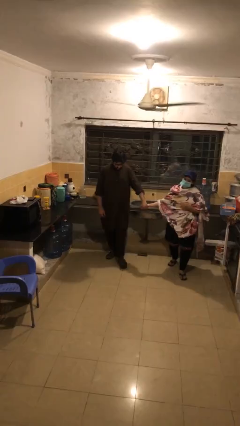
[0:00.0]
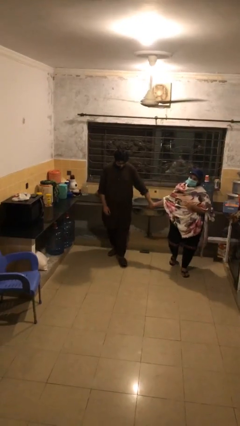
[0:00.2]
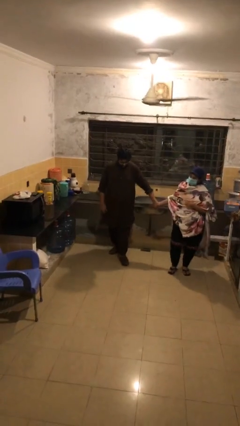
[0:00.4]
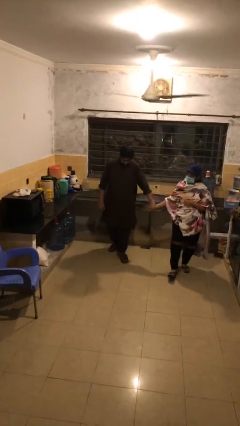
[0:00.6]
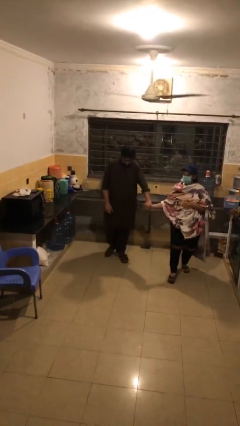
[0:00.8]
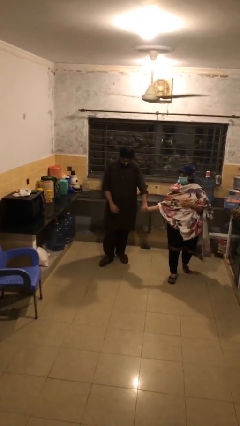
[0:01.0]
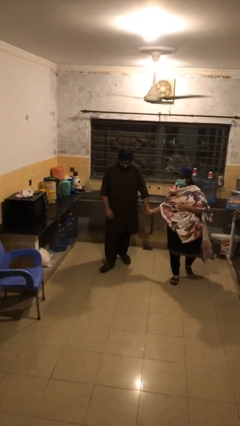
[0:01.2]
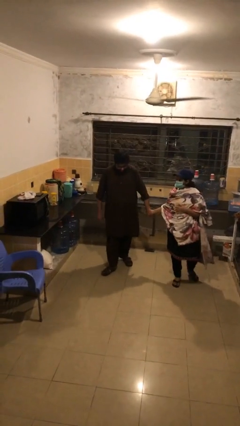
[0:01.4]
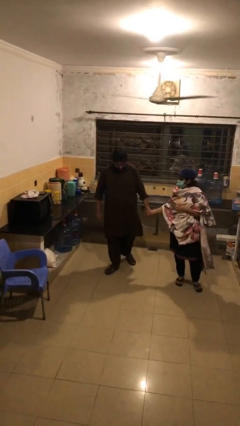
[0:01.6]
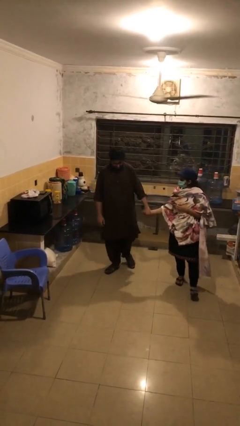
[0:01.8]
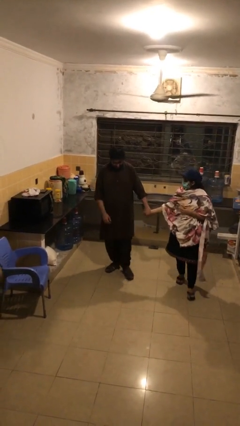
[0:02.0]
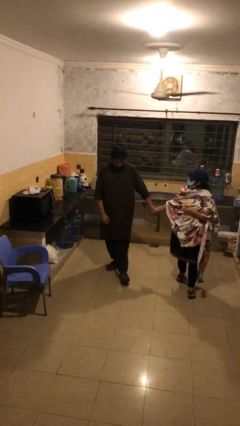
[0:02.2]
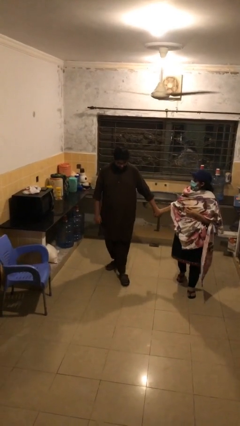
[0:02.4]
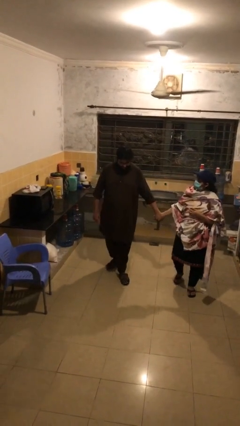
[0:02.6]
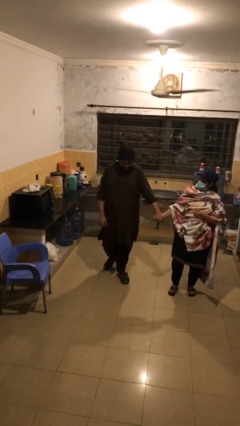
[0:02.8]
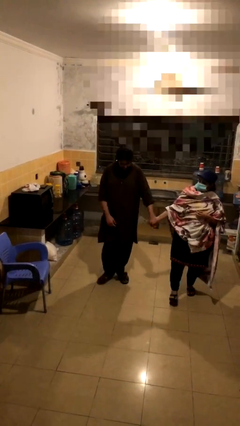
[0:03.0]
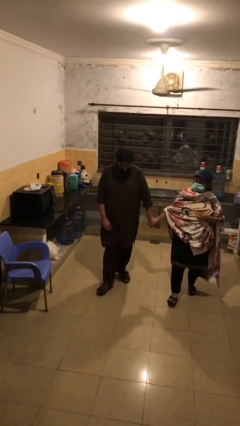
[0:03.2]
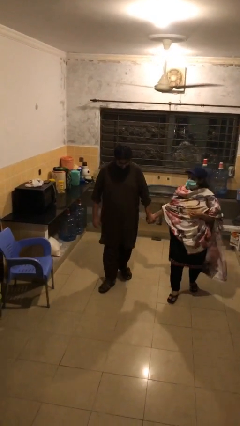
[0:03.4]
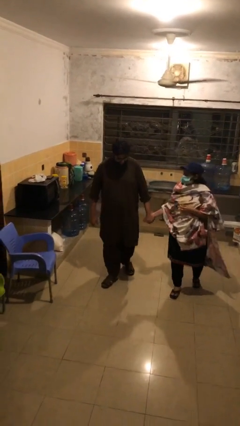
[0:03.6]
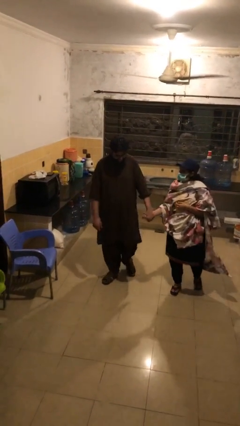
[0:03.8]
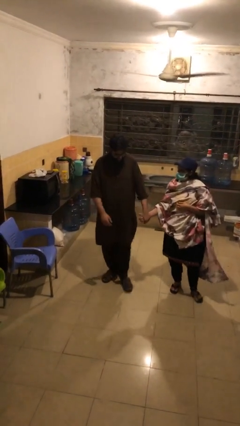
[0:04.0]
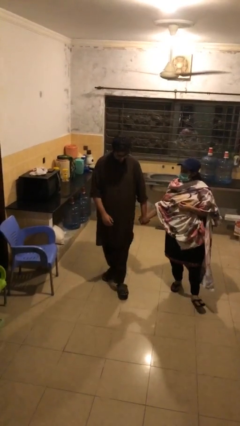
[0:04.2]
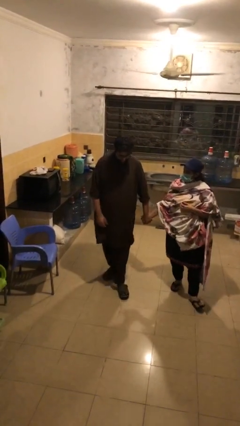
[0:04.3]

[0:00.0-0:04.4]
person holds hand

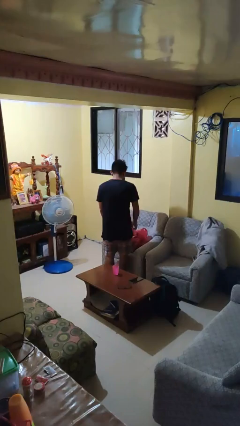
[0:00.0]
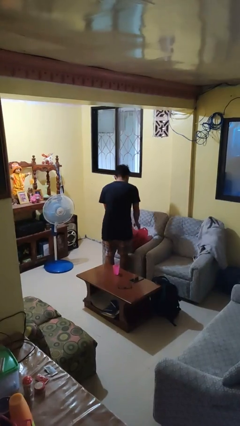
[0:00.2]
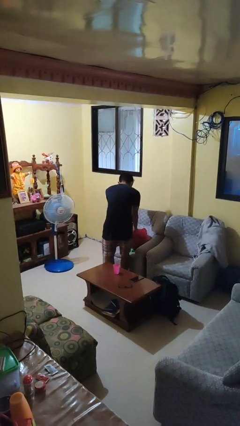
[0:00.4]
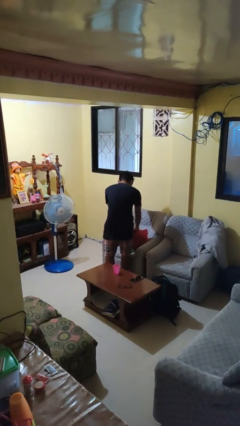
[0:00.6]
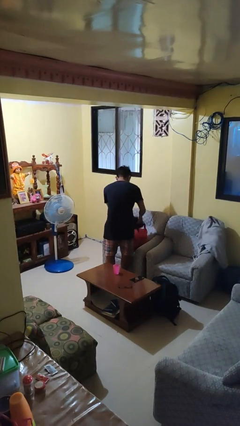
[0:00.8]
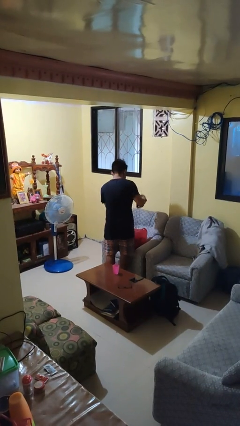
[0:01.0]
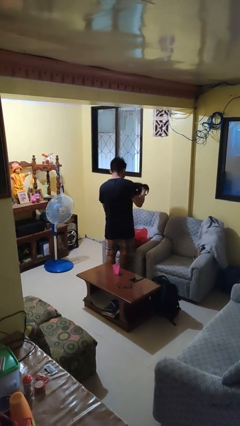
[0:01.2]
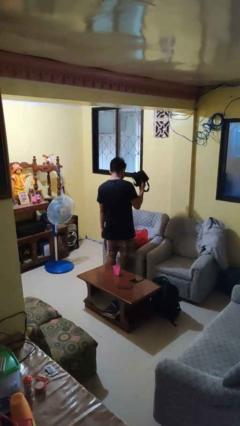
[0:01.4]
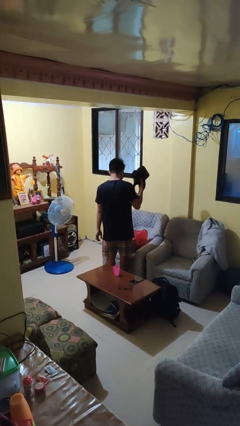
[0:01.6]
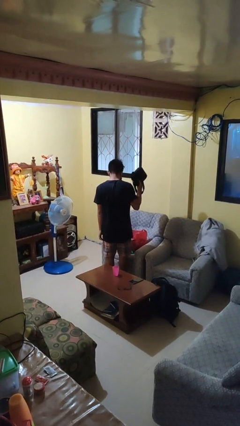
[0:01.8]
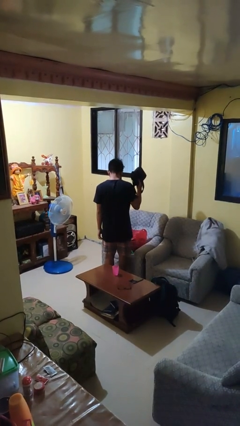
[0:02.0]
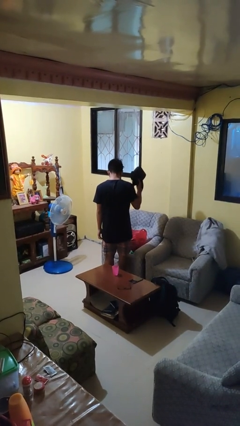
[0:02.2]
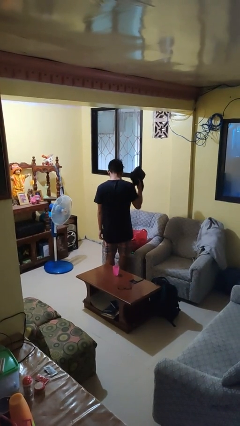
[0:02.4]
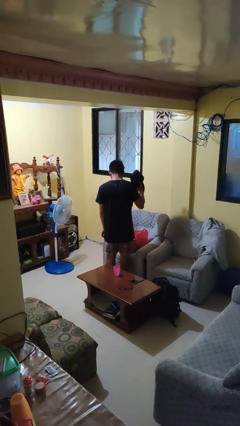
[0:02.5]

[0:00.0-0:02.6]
person takes object from bag

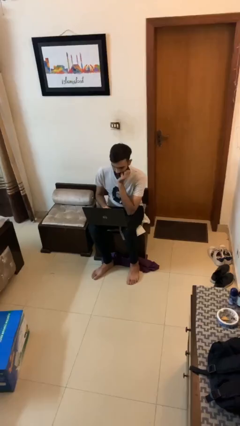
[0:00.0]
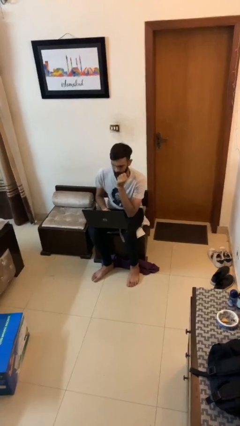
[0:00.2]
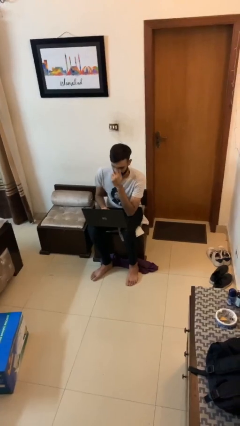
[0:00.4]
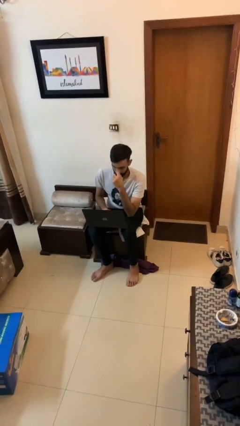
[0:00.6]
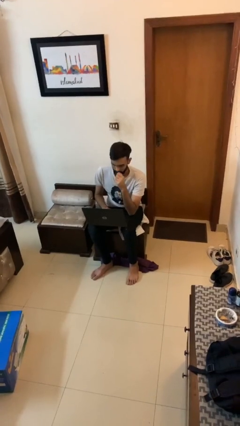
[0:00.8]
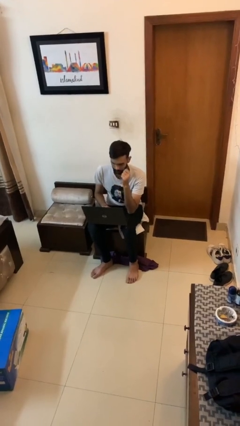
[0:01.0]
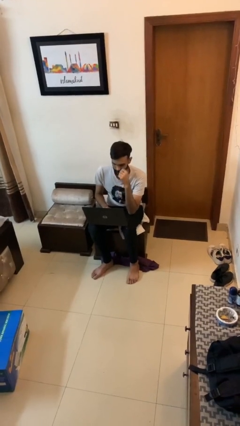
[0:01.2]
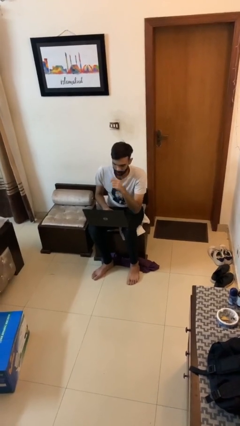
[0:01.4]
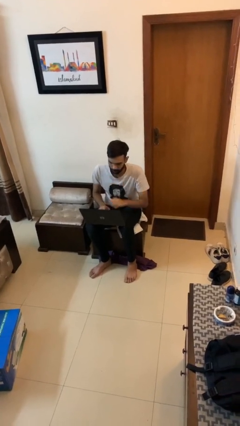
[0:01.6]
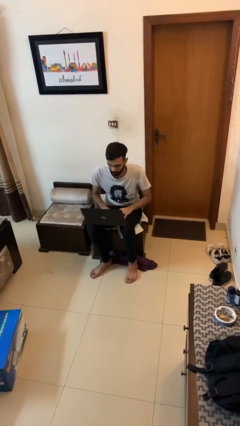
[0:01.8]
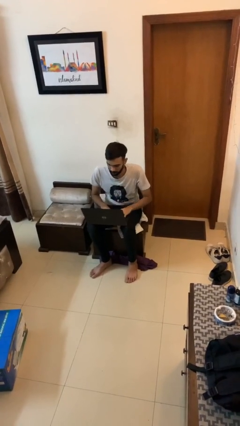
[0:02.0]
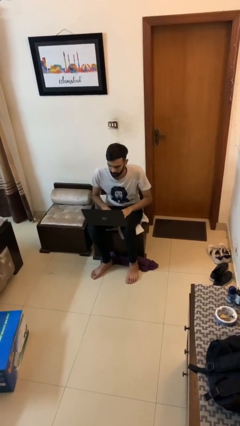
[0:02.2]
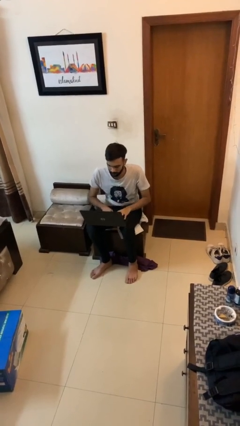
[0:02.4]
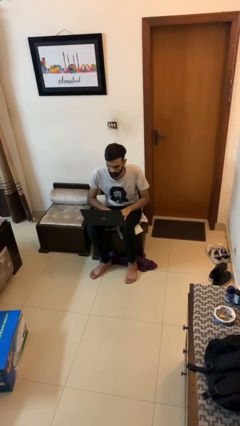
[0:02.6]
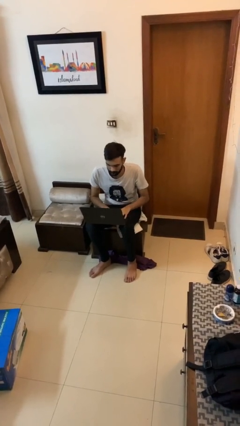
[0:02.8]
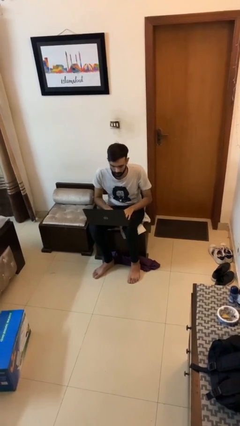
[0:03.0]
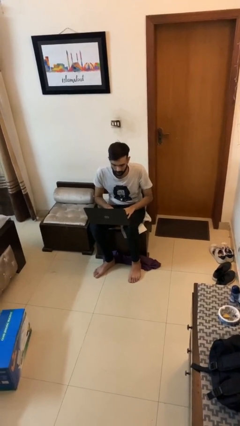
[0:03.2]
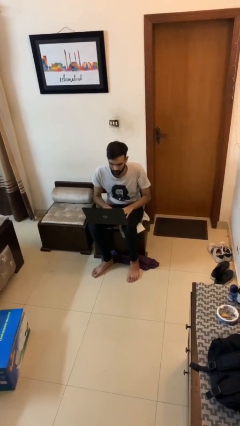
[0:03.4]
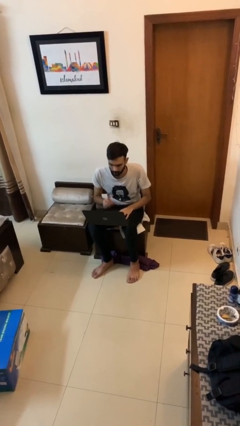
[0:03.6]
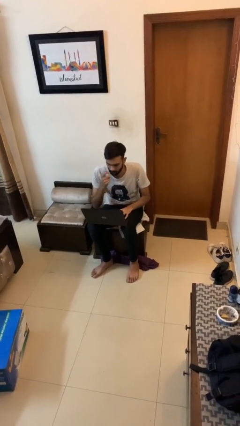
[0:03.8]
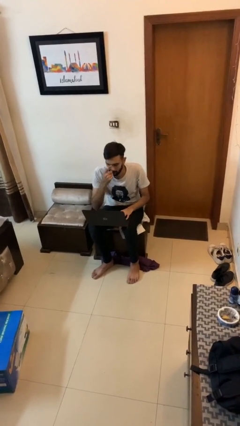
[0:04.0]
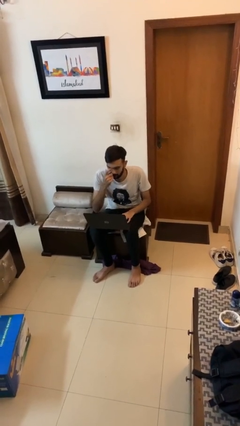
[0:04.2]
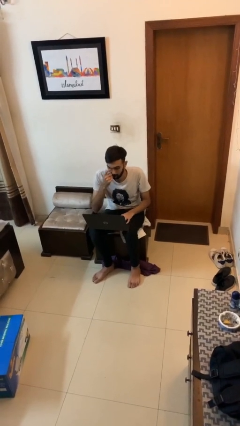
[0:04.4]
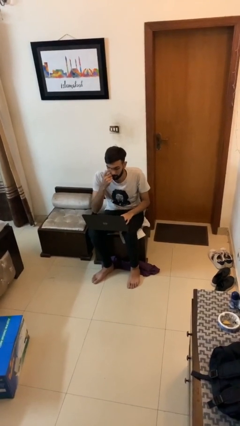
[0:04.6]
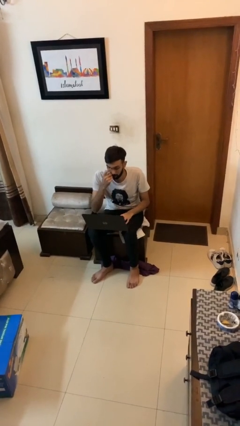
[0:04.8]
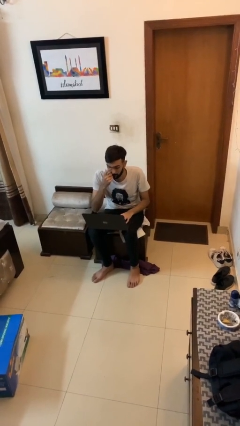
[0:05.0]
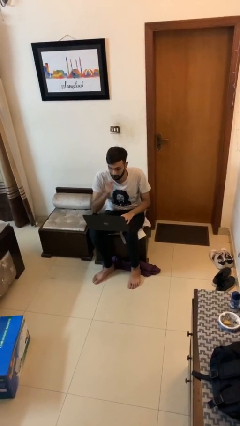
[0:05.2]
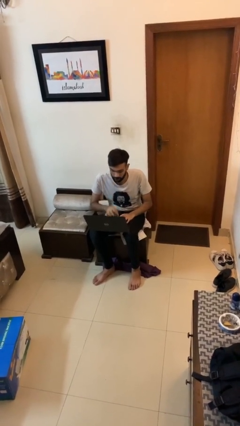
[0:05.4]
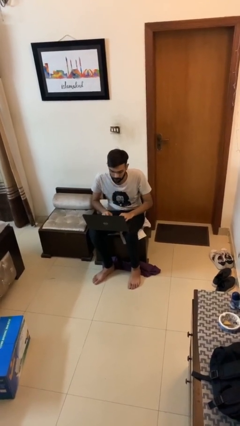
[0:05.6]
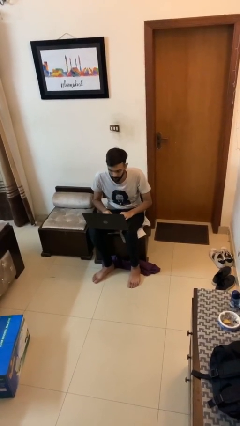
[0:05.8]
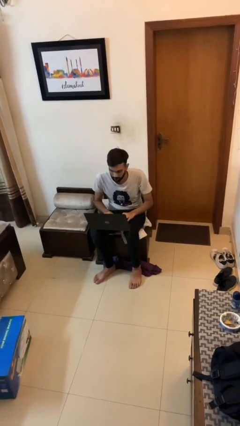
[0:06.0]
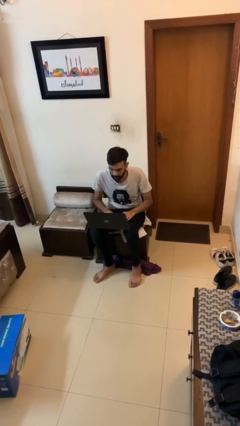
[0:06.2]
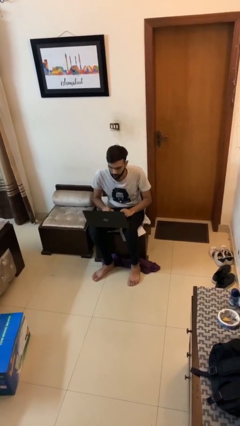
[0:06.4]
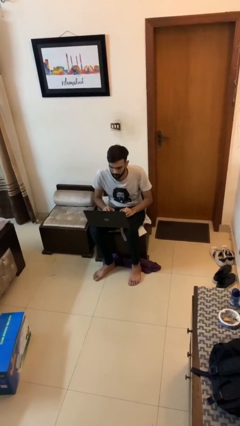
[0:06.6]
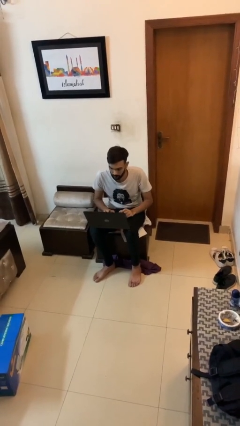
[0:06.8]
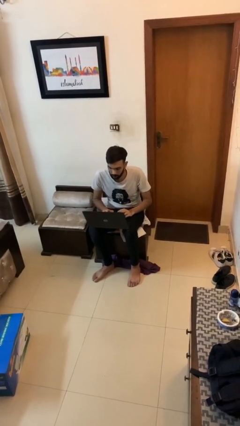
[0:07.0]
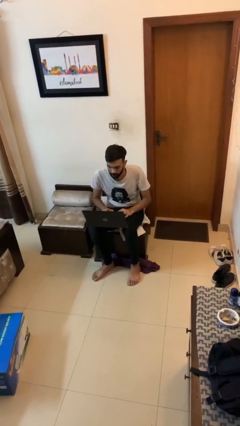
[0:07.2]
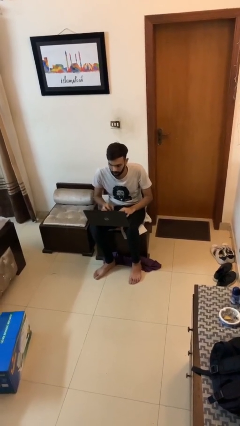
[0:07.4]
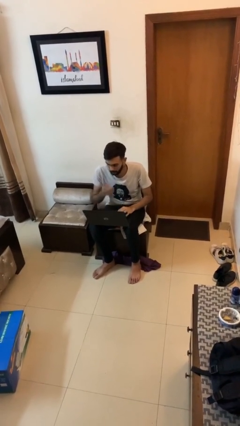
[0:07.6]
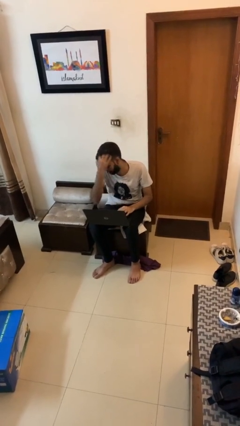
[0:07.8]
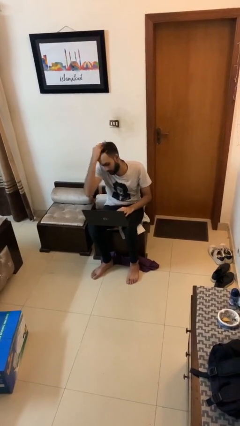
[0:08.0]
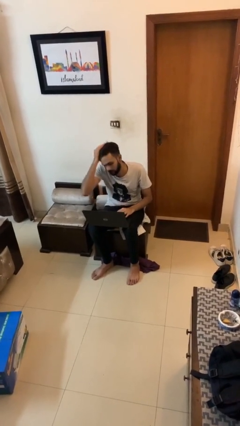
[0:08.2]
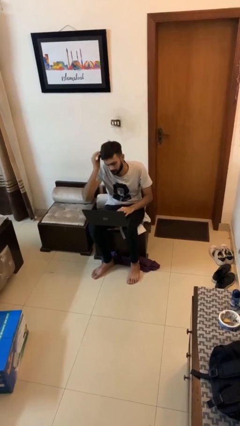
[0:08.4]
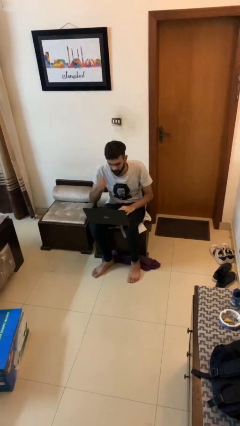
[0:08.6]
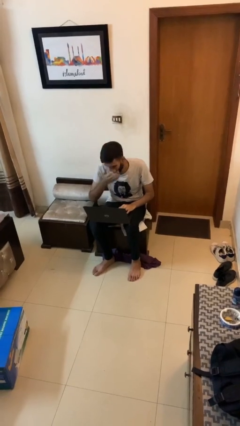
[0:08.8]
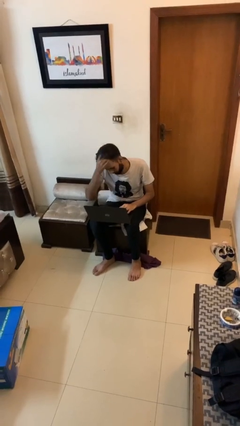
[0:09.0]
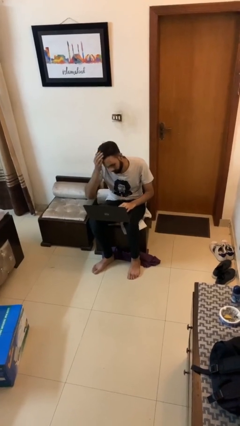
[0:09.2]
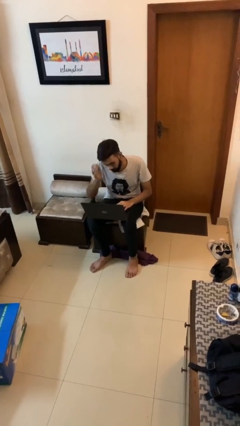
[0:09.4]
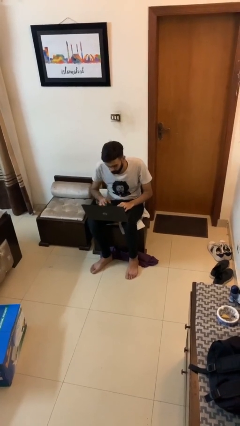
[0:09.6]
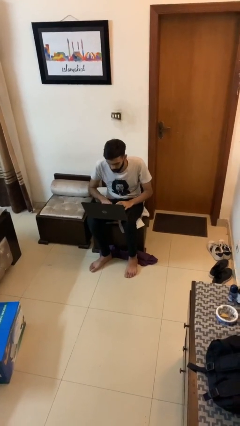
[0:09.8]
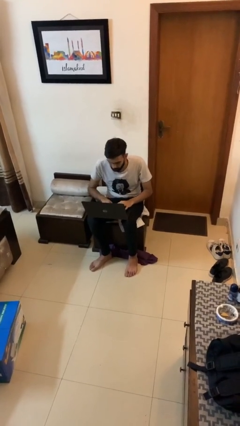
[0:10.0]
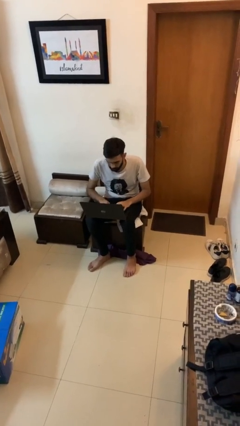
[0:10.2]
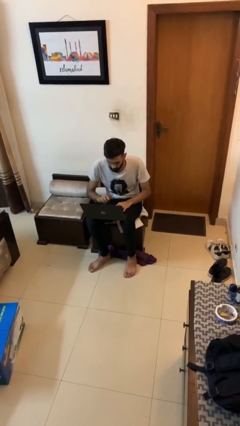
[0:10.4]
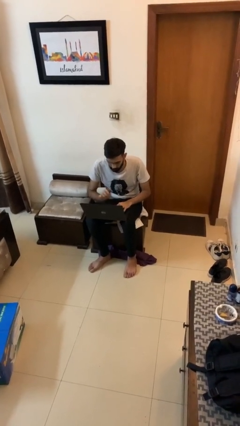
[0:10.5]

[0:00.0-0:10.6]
person interacts with laptop

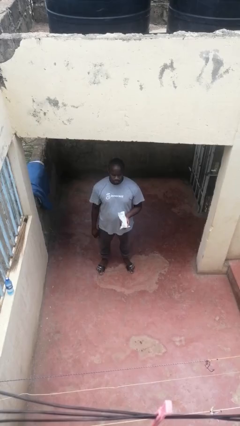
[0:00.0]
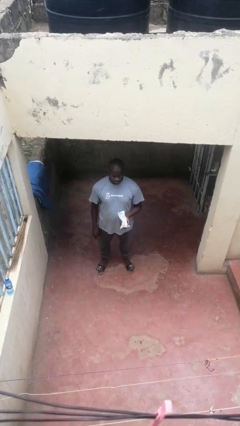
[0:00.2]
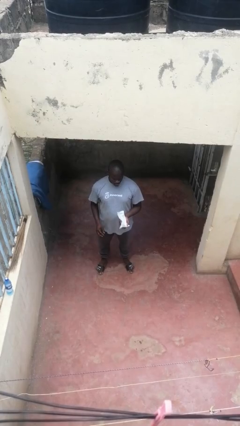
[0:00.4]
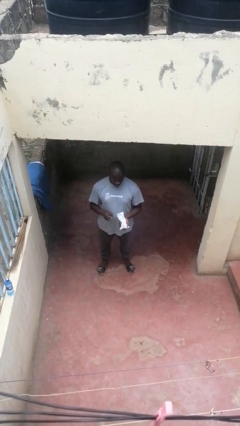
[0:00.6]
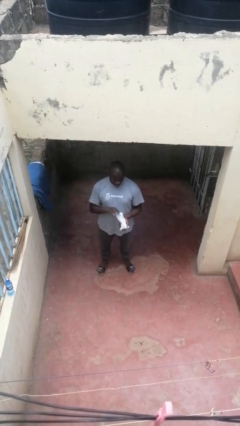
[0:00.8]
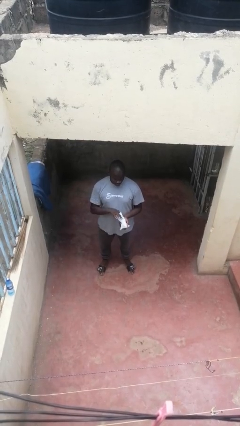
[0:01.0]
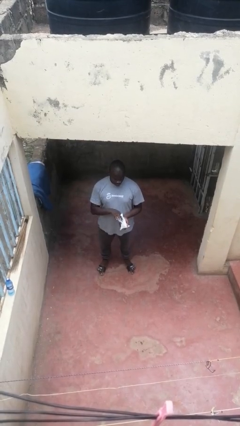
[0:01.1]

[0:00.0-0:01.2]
person eats snack from bag
